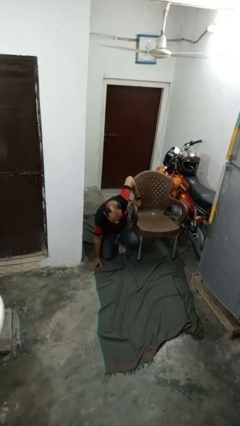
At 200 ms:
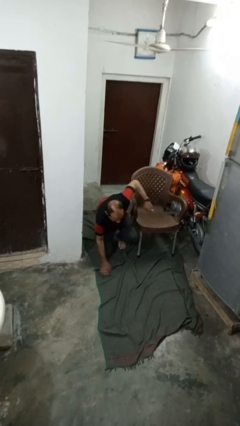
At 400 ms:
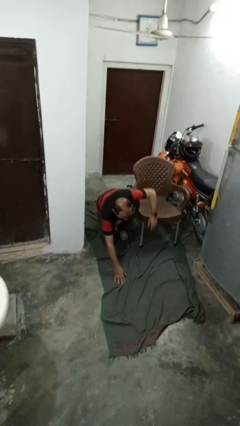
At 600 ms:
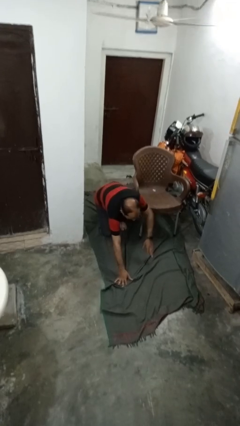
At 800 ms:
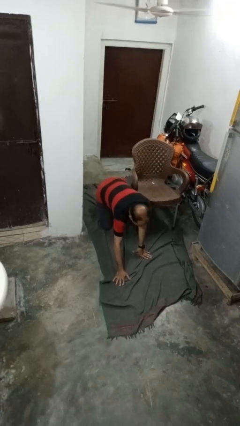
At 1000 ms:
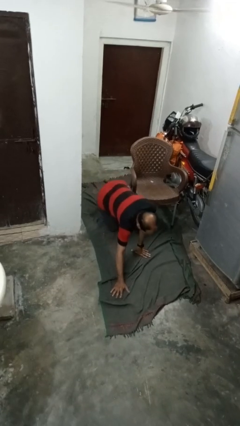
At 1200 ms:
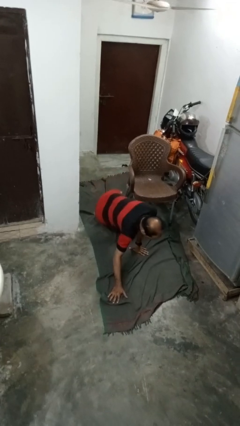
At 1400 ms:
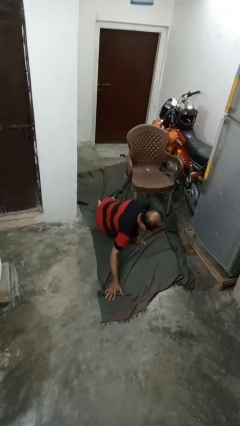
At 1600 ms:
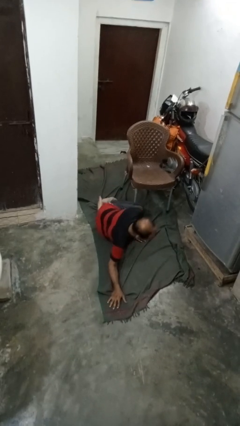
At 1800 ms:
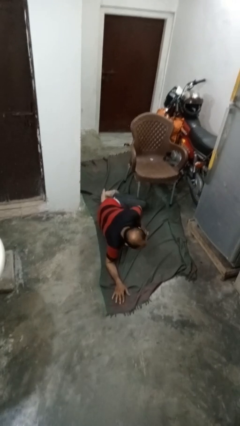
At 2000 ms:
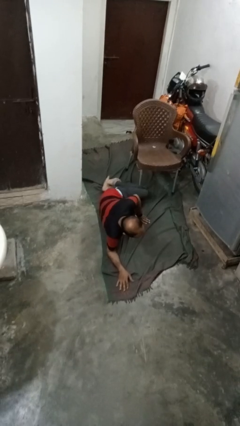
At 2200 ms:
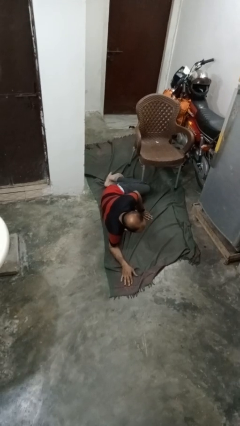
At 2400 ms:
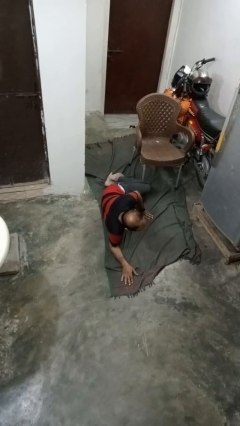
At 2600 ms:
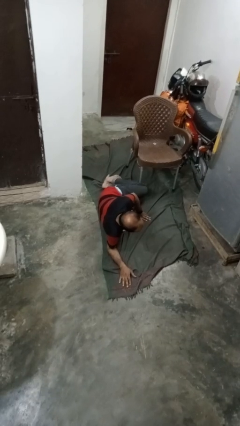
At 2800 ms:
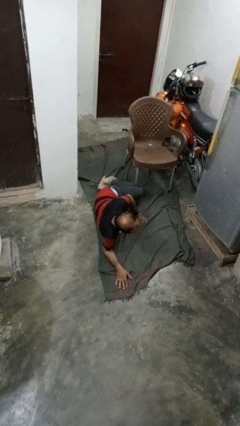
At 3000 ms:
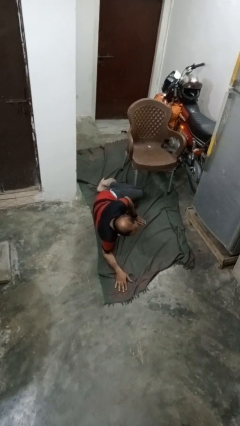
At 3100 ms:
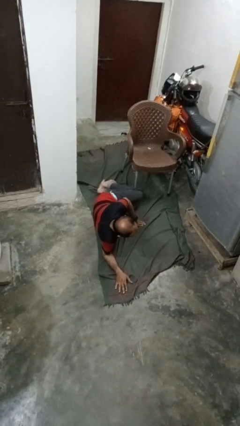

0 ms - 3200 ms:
person lies down on floor

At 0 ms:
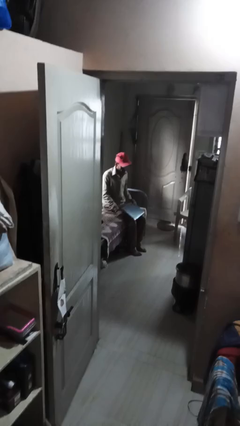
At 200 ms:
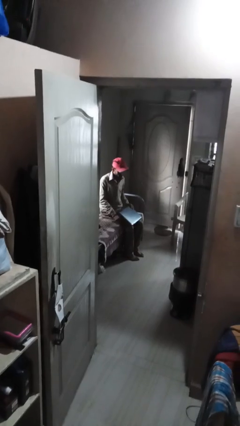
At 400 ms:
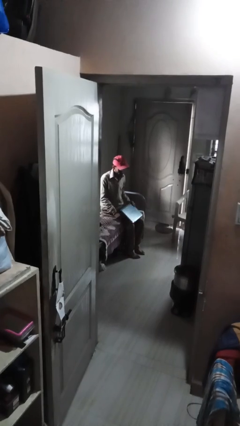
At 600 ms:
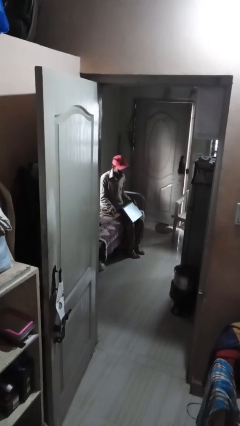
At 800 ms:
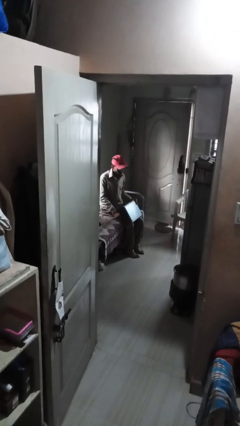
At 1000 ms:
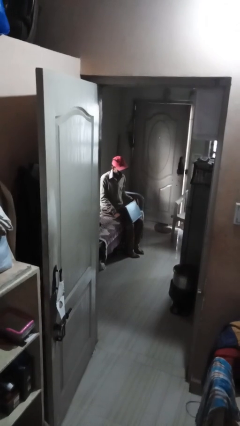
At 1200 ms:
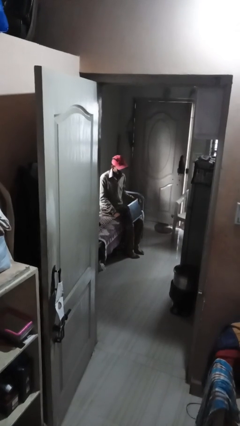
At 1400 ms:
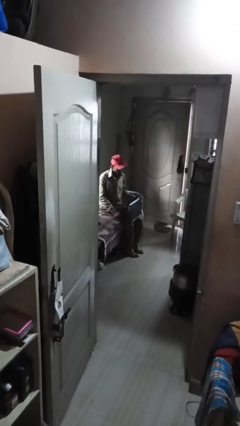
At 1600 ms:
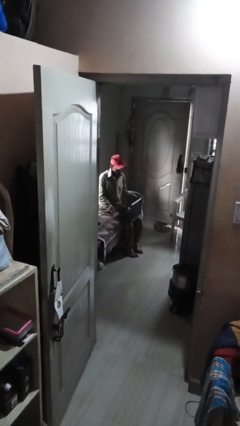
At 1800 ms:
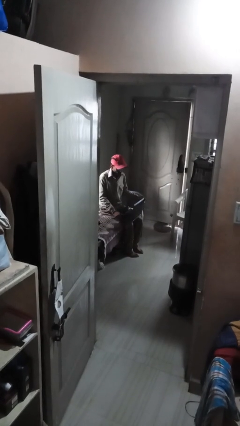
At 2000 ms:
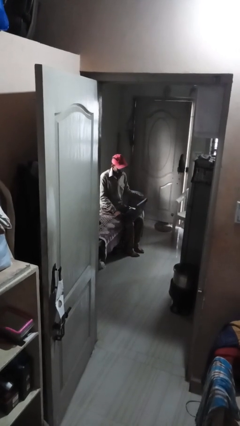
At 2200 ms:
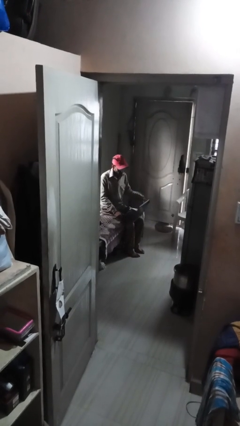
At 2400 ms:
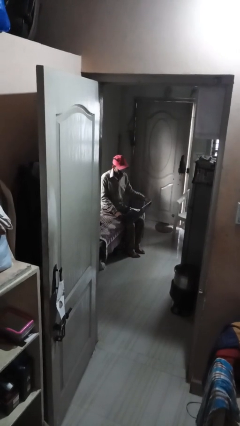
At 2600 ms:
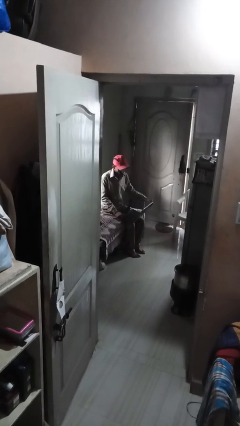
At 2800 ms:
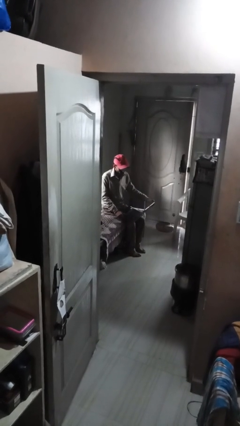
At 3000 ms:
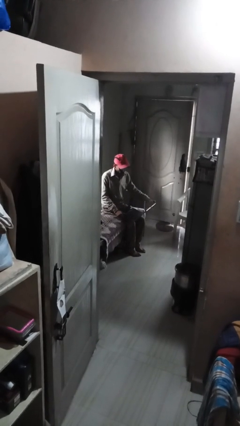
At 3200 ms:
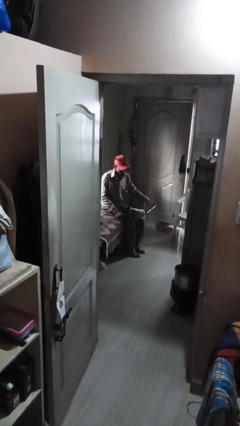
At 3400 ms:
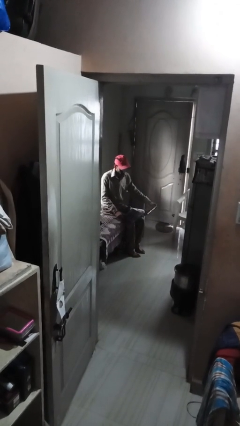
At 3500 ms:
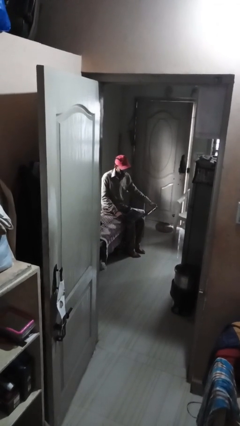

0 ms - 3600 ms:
person opens laptop

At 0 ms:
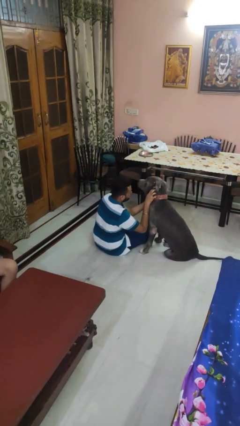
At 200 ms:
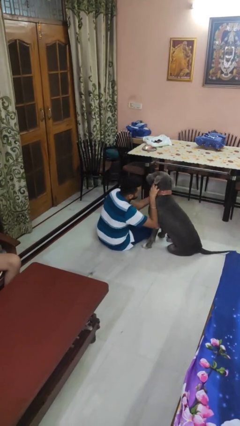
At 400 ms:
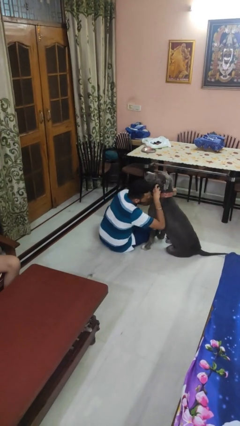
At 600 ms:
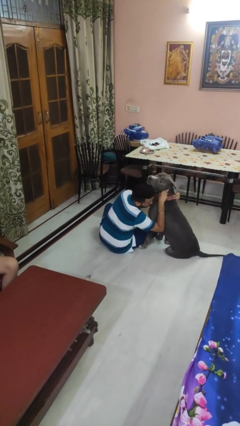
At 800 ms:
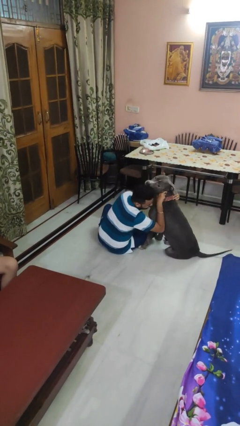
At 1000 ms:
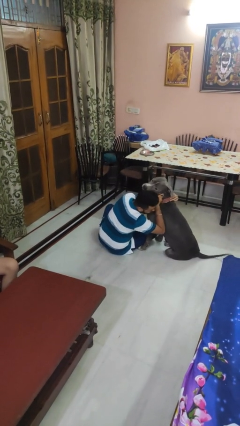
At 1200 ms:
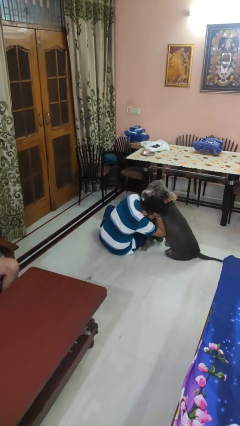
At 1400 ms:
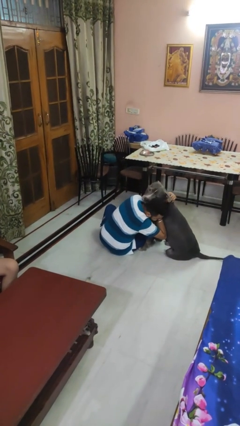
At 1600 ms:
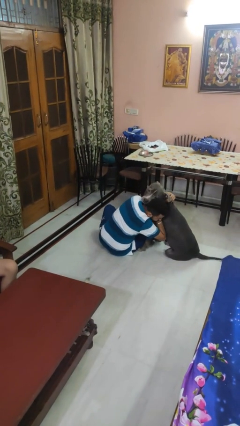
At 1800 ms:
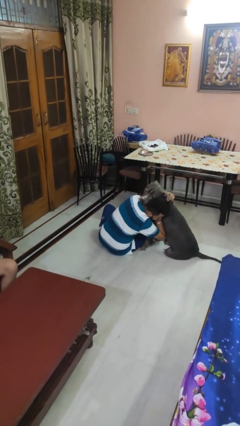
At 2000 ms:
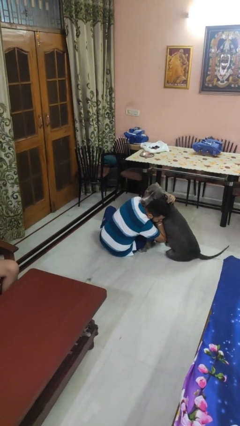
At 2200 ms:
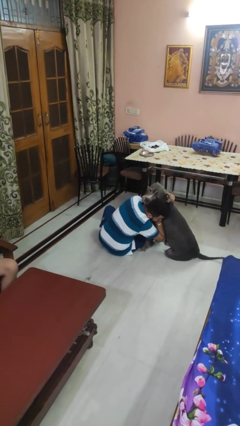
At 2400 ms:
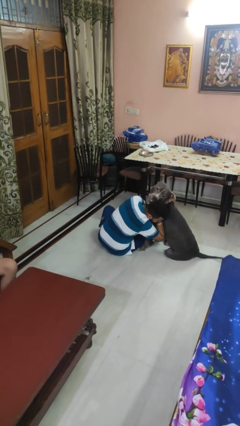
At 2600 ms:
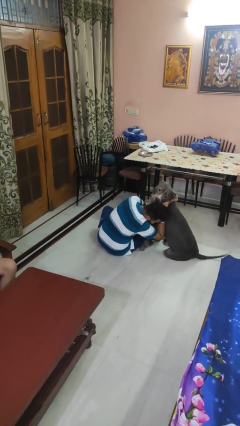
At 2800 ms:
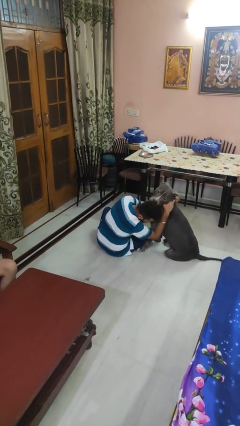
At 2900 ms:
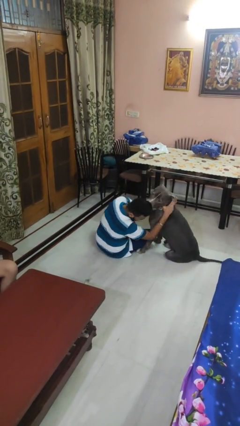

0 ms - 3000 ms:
person hugs dog

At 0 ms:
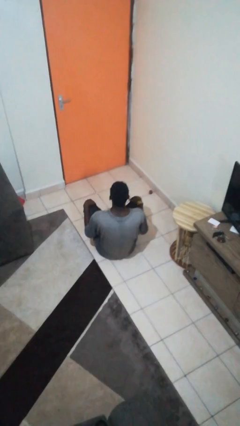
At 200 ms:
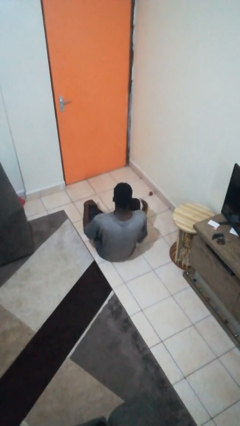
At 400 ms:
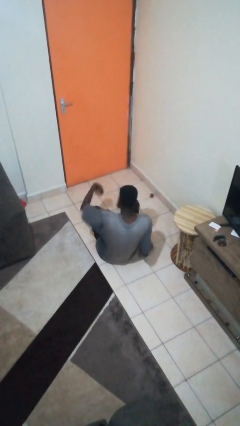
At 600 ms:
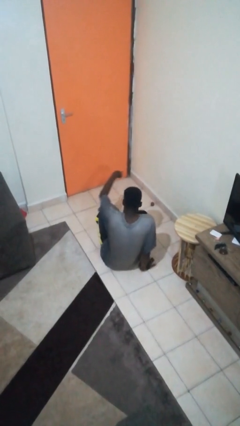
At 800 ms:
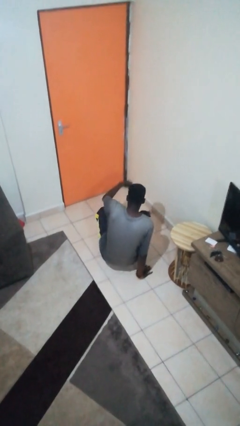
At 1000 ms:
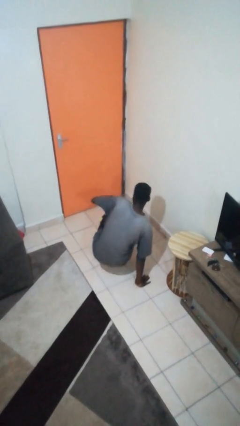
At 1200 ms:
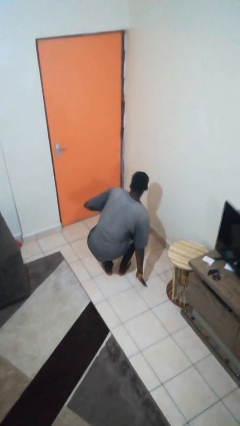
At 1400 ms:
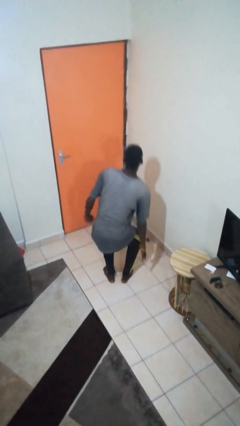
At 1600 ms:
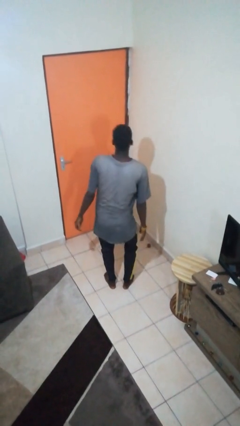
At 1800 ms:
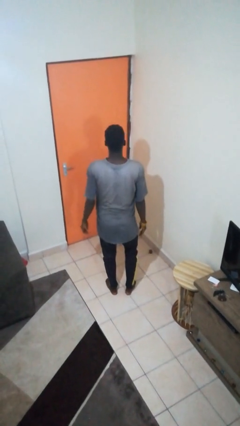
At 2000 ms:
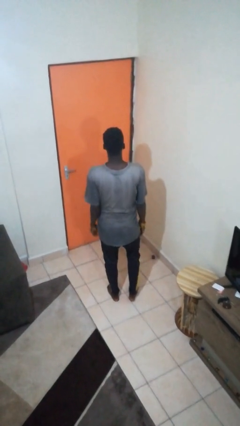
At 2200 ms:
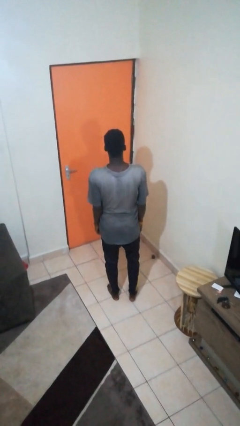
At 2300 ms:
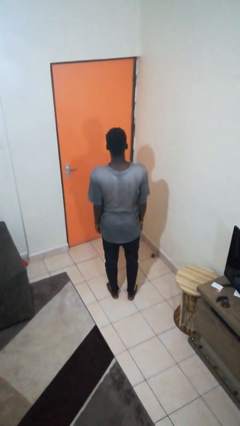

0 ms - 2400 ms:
person stands up from floor

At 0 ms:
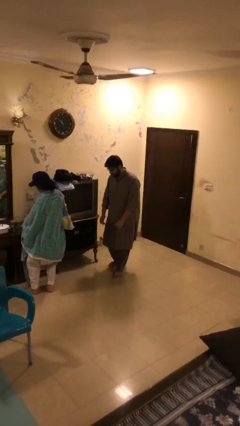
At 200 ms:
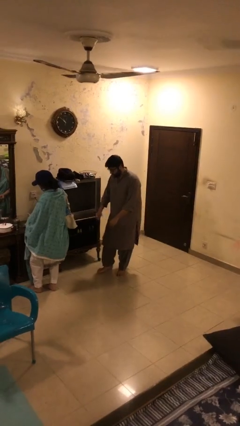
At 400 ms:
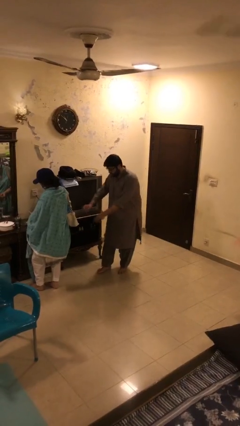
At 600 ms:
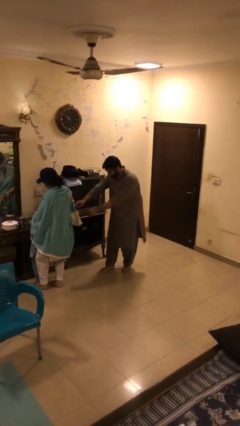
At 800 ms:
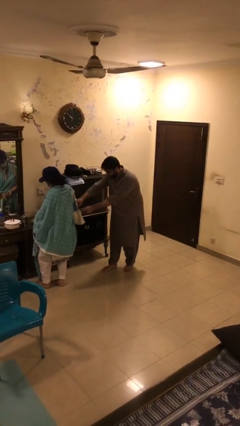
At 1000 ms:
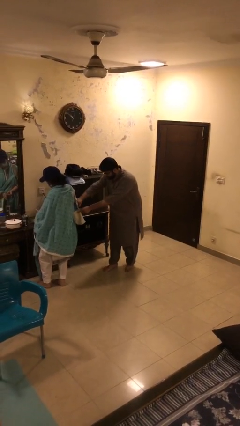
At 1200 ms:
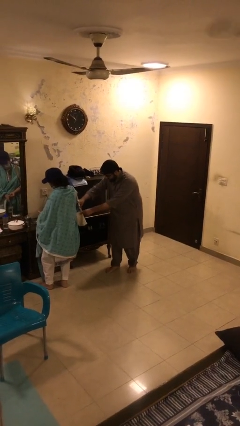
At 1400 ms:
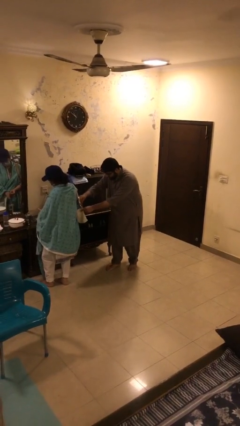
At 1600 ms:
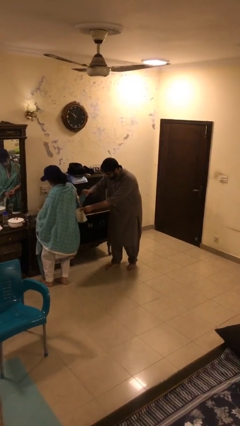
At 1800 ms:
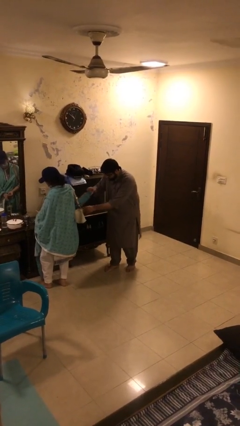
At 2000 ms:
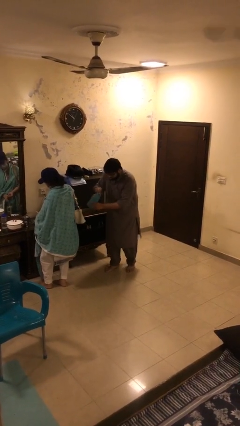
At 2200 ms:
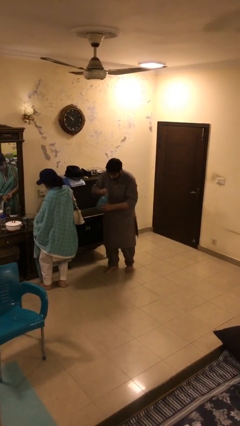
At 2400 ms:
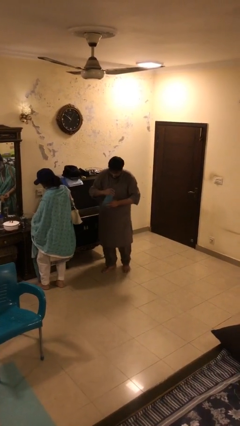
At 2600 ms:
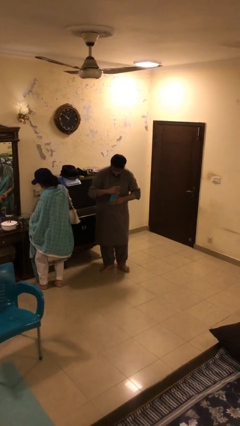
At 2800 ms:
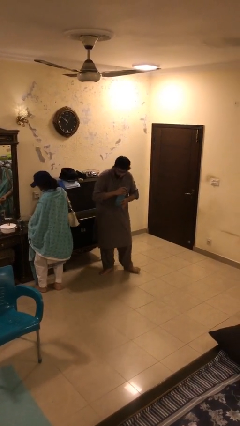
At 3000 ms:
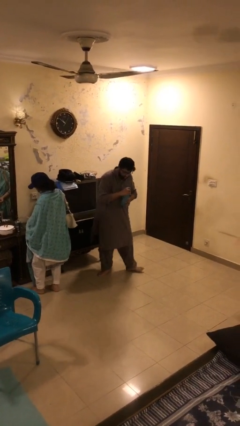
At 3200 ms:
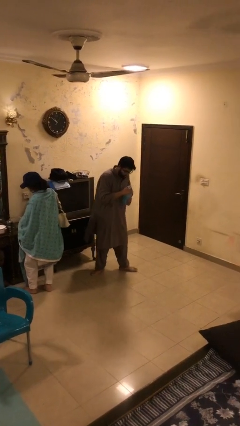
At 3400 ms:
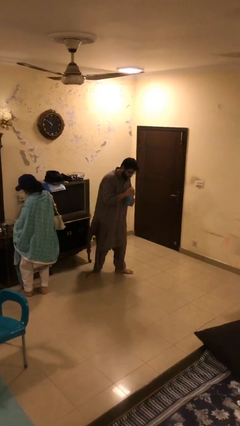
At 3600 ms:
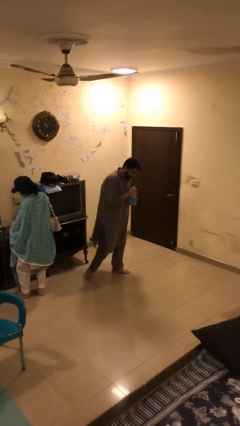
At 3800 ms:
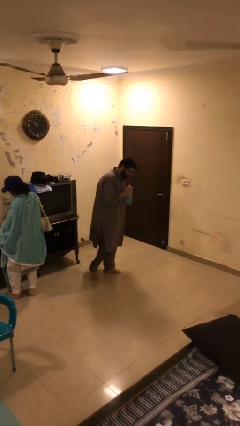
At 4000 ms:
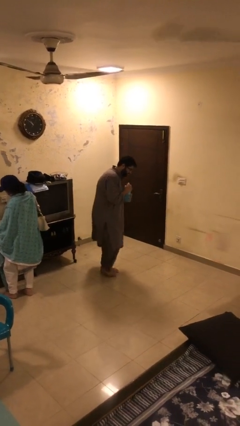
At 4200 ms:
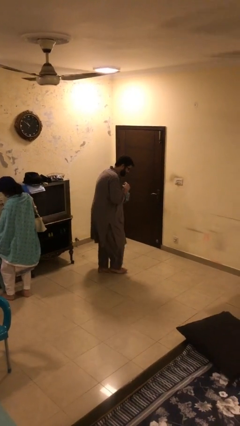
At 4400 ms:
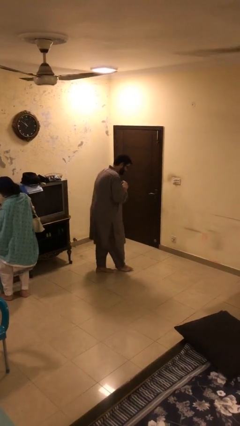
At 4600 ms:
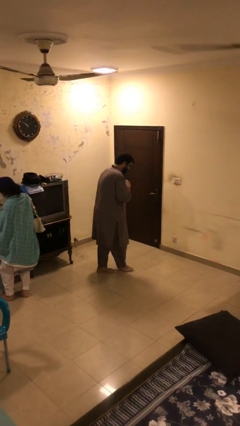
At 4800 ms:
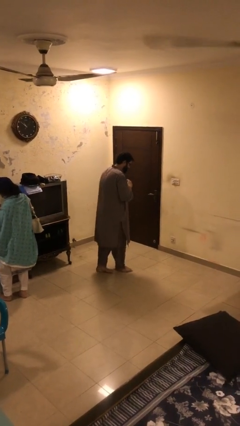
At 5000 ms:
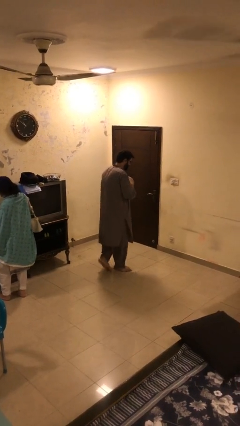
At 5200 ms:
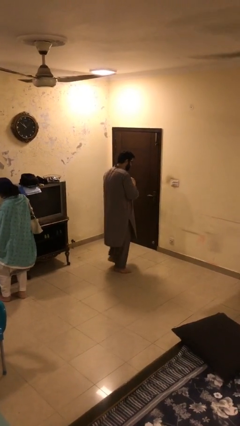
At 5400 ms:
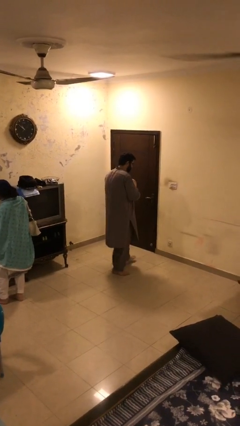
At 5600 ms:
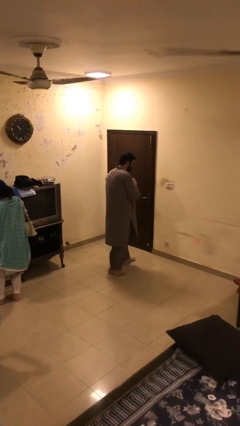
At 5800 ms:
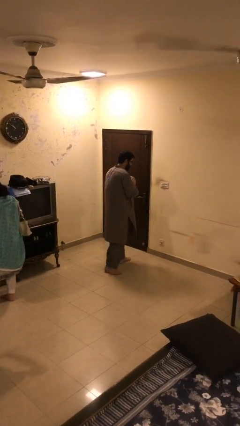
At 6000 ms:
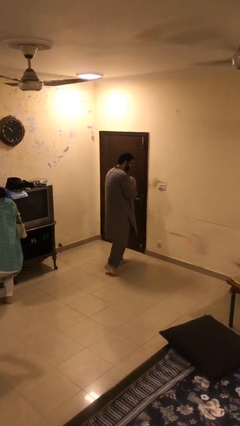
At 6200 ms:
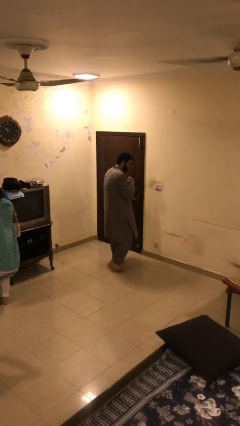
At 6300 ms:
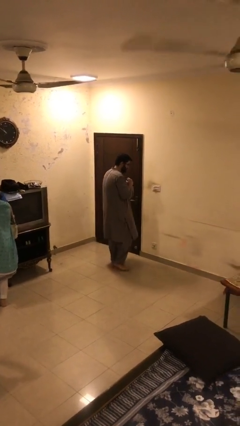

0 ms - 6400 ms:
person steals object from person
